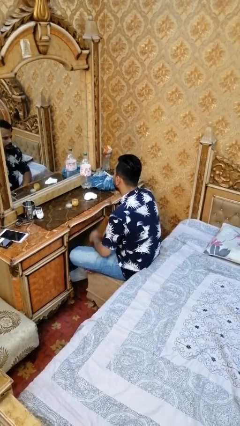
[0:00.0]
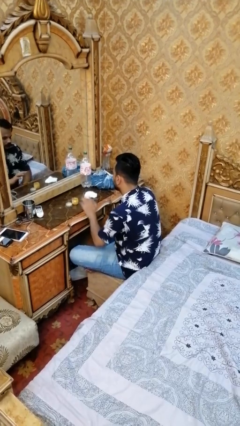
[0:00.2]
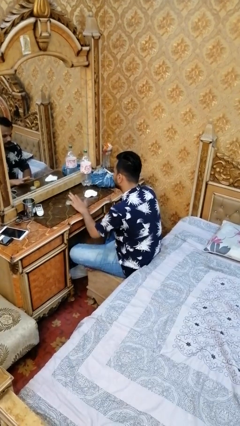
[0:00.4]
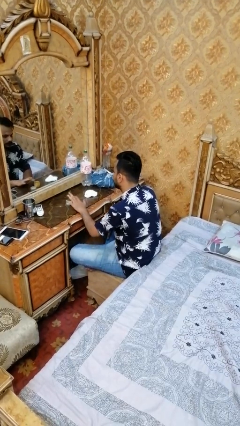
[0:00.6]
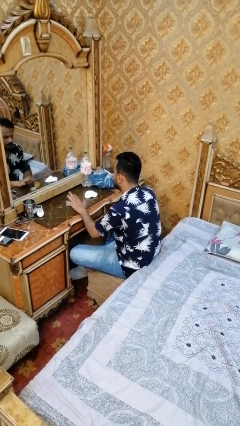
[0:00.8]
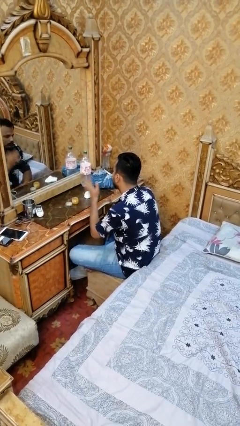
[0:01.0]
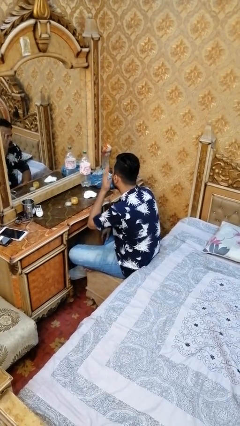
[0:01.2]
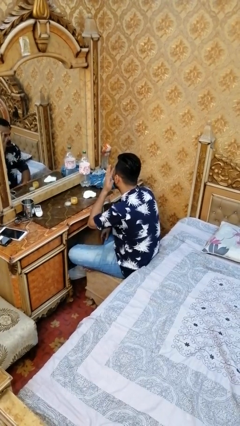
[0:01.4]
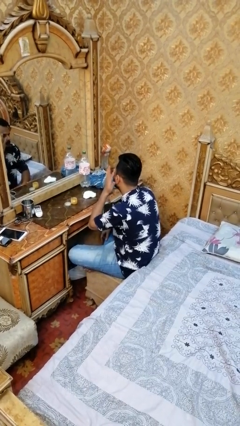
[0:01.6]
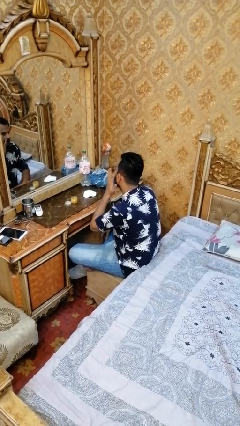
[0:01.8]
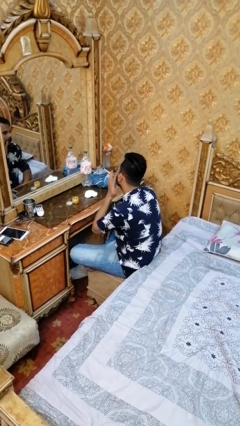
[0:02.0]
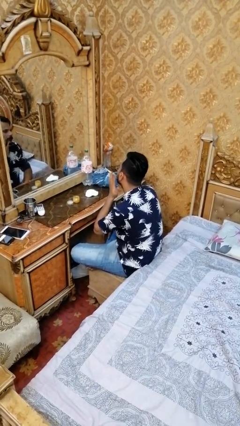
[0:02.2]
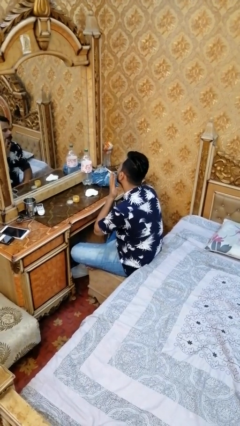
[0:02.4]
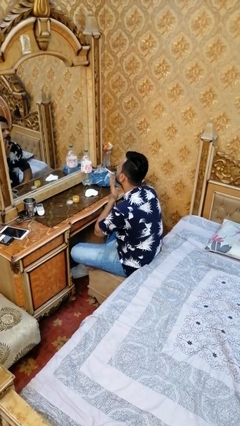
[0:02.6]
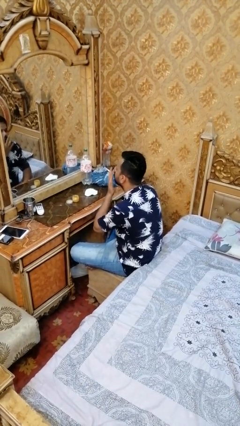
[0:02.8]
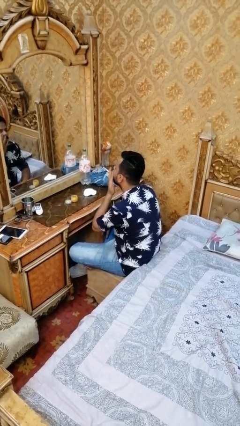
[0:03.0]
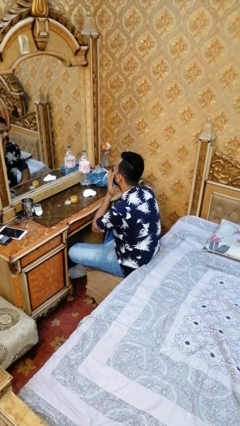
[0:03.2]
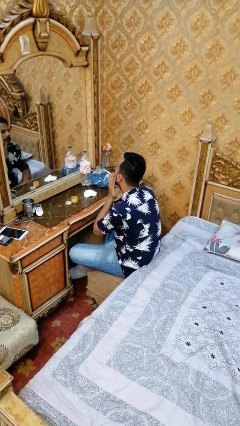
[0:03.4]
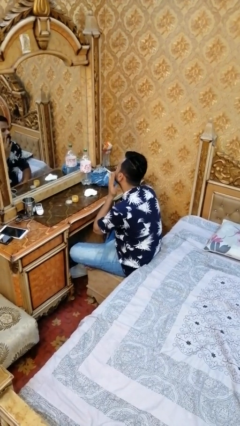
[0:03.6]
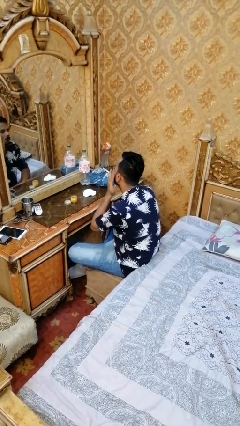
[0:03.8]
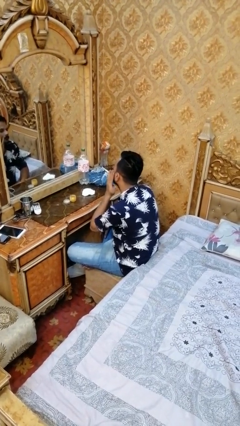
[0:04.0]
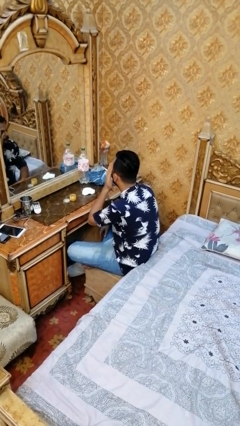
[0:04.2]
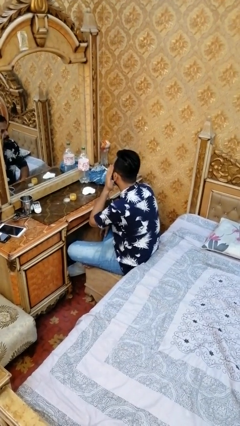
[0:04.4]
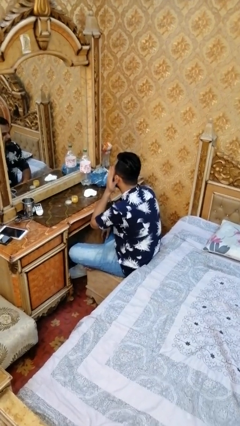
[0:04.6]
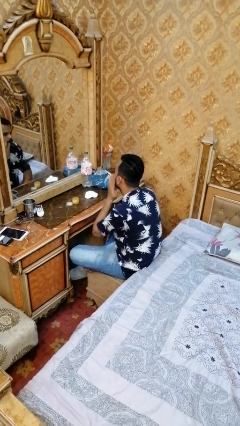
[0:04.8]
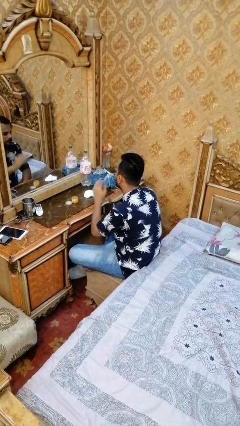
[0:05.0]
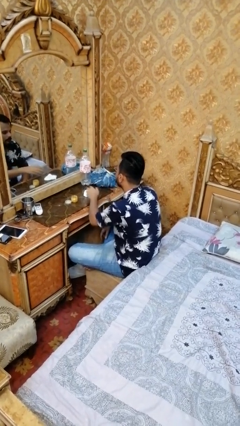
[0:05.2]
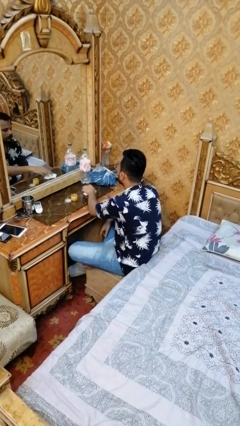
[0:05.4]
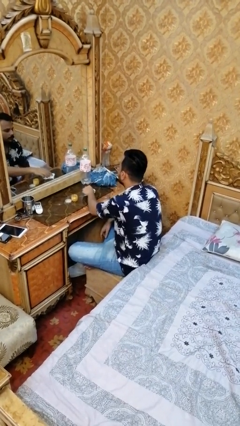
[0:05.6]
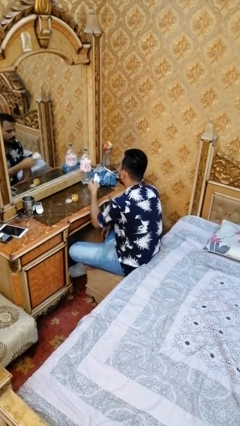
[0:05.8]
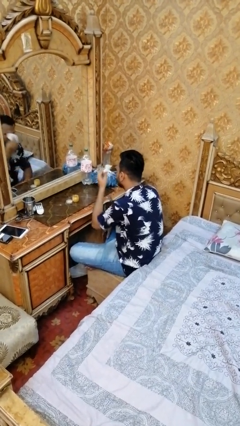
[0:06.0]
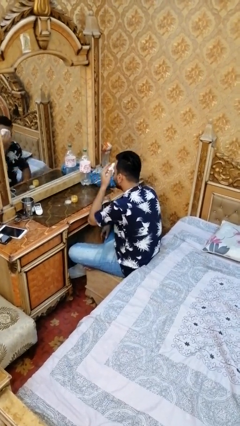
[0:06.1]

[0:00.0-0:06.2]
person puts on facemask

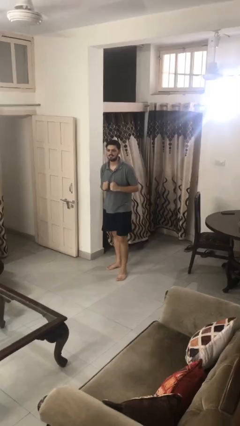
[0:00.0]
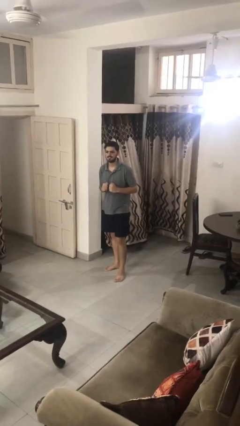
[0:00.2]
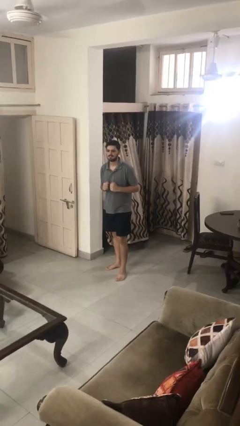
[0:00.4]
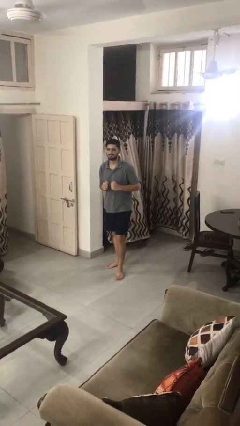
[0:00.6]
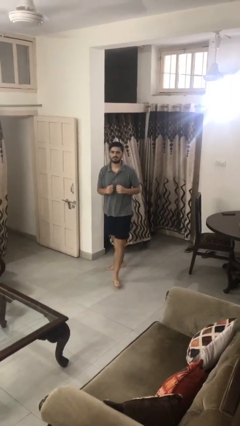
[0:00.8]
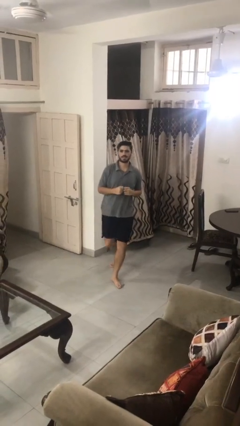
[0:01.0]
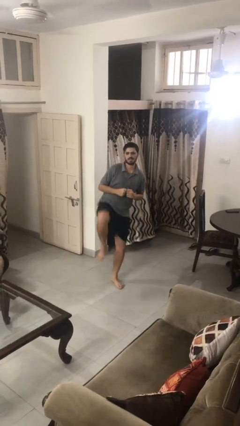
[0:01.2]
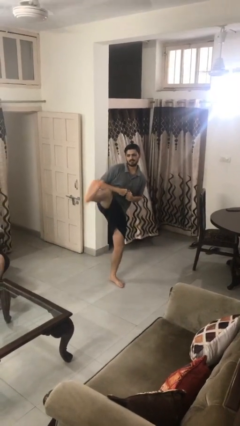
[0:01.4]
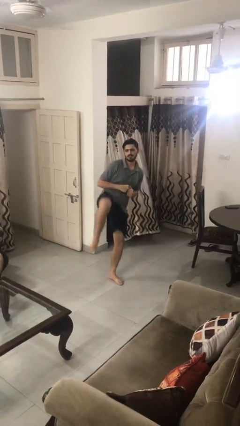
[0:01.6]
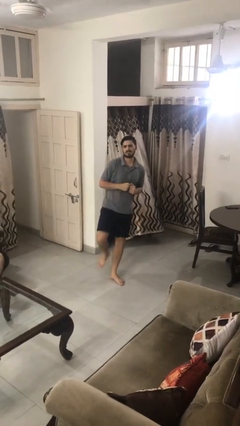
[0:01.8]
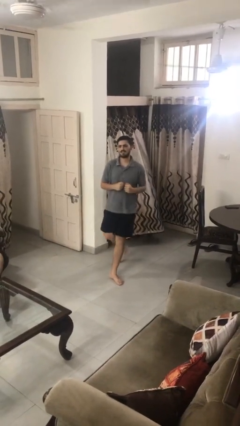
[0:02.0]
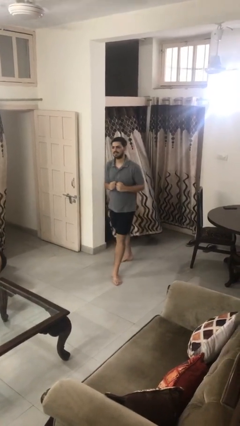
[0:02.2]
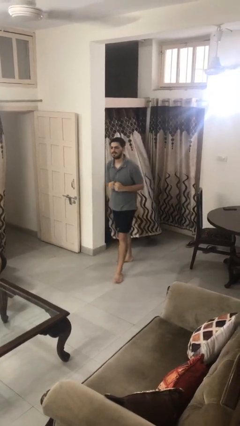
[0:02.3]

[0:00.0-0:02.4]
person karate kicks

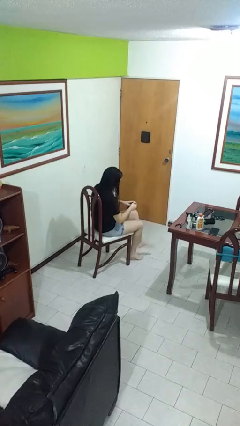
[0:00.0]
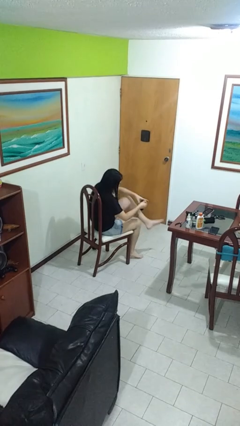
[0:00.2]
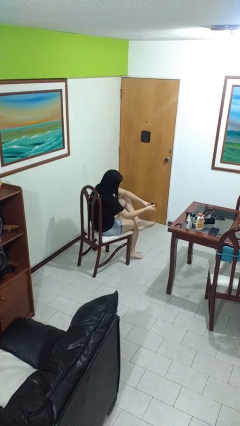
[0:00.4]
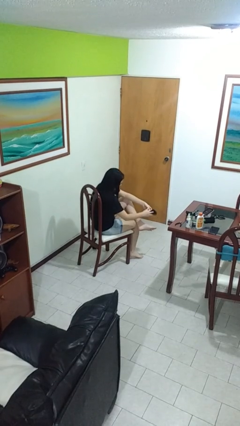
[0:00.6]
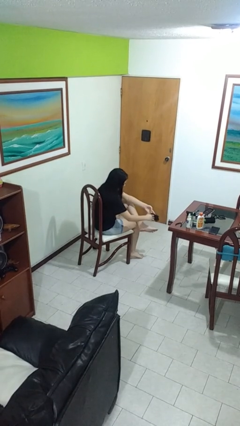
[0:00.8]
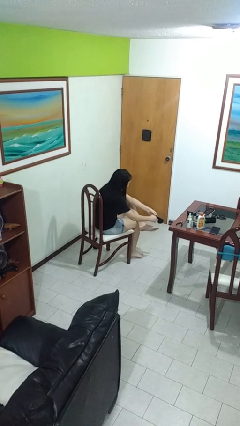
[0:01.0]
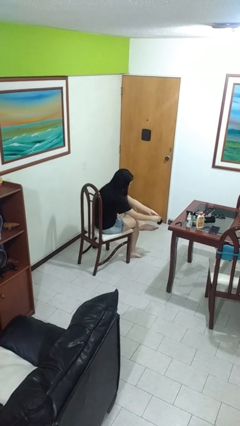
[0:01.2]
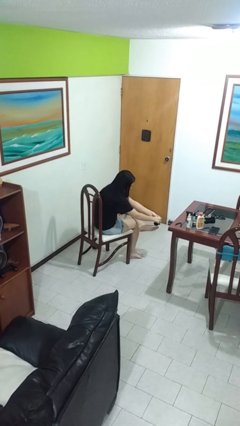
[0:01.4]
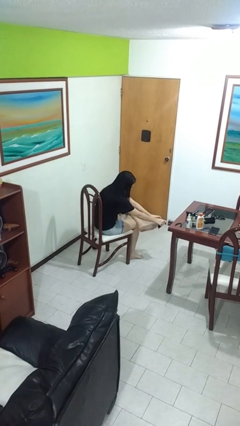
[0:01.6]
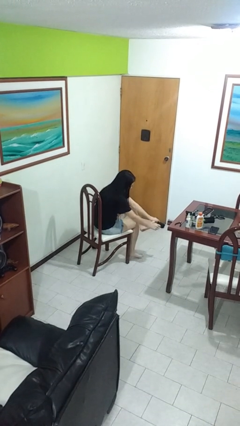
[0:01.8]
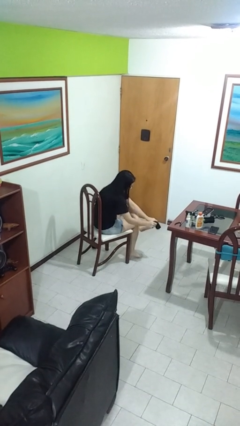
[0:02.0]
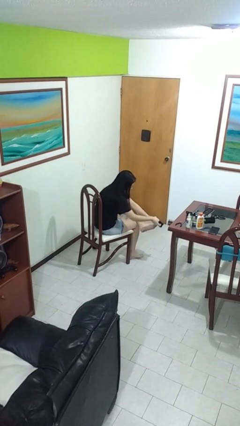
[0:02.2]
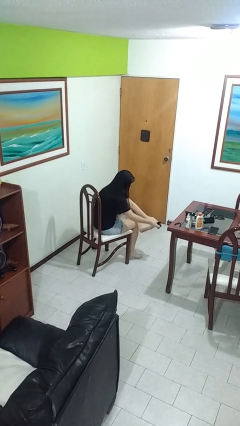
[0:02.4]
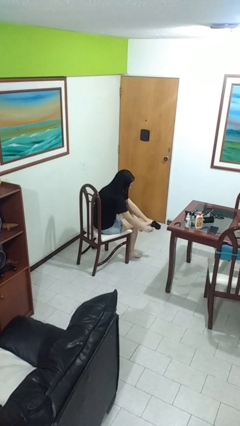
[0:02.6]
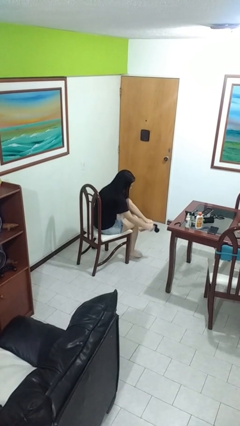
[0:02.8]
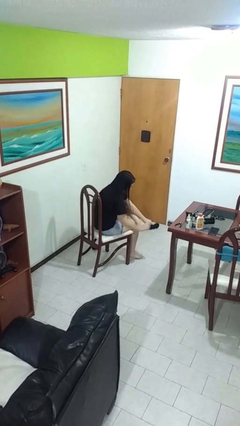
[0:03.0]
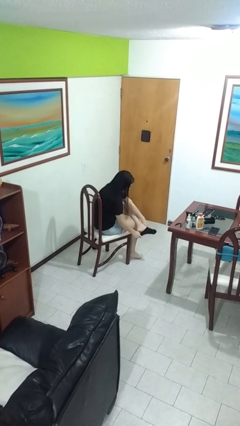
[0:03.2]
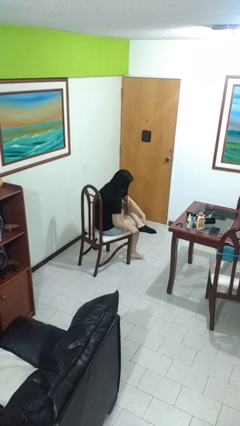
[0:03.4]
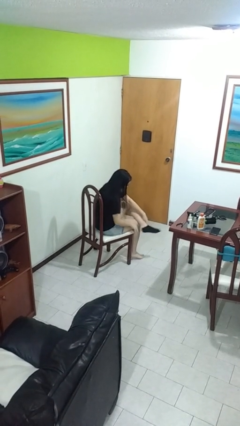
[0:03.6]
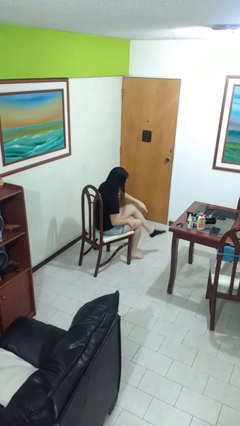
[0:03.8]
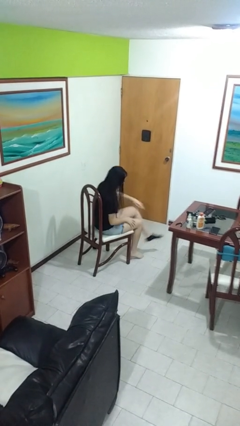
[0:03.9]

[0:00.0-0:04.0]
person puts on socks

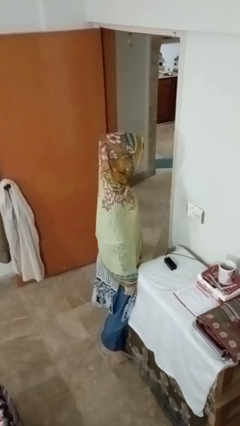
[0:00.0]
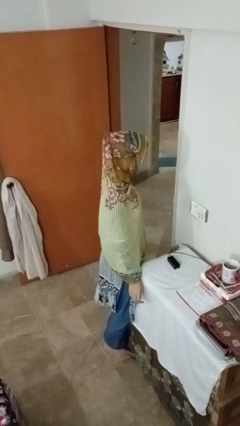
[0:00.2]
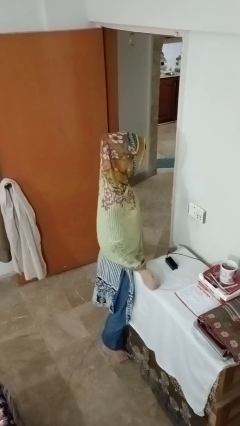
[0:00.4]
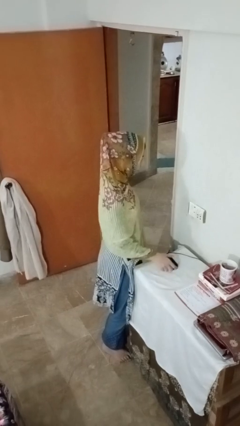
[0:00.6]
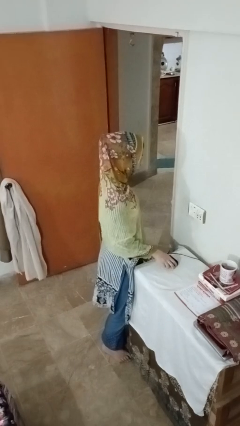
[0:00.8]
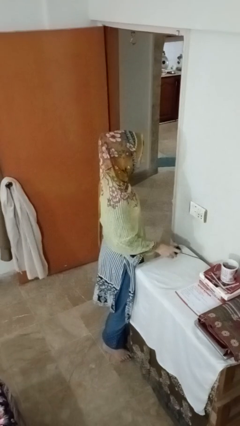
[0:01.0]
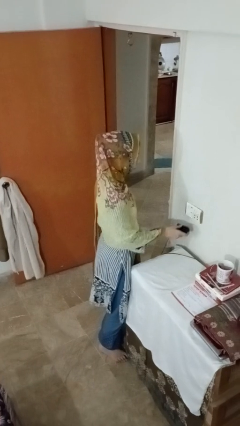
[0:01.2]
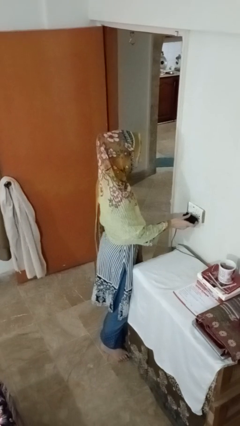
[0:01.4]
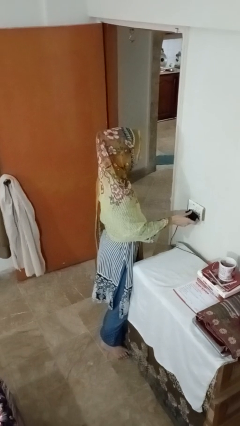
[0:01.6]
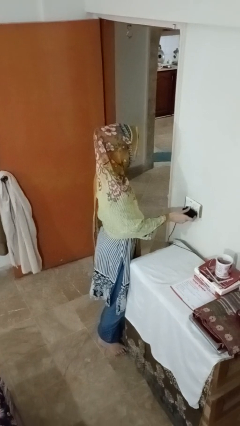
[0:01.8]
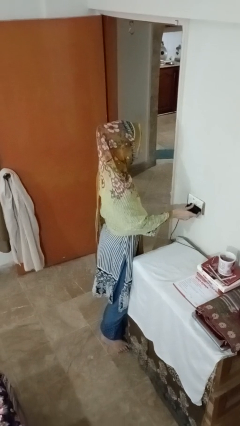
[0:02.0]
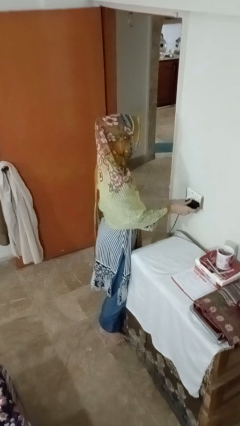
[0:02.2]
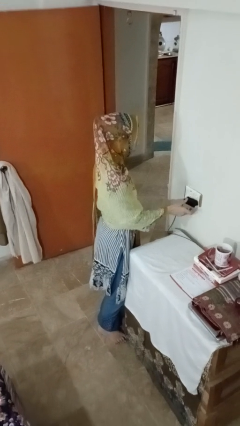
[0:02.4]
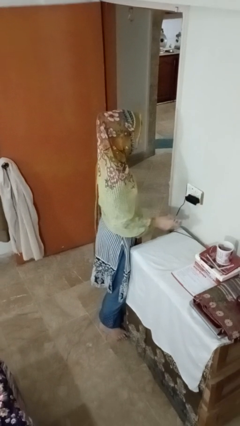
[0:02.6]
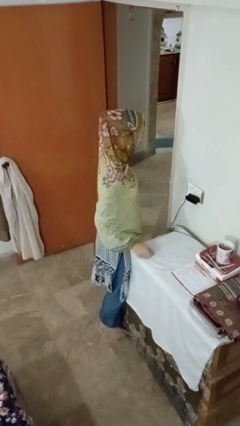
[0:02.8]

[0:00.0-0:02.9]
person plugs into electrical socket

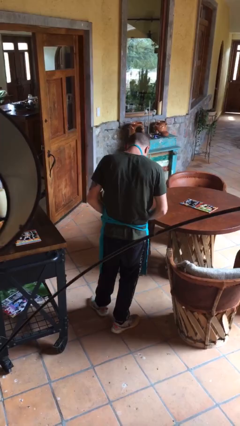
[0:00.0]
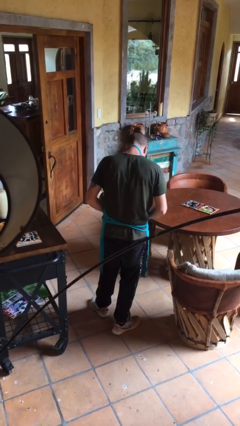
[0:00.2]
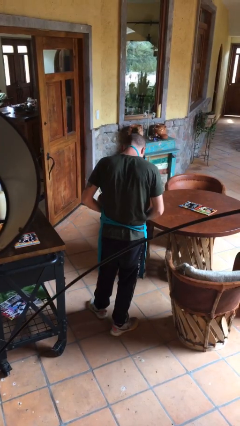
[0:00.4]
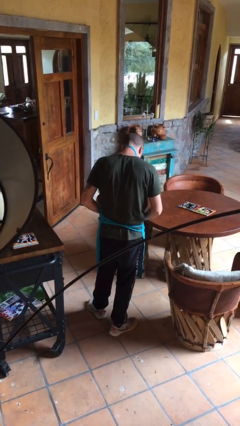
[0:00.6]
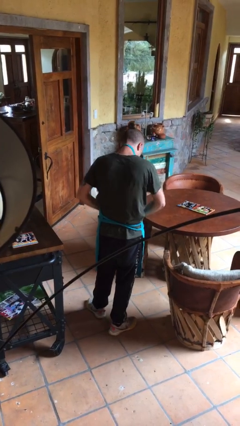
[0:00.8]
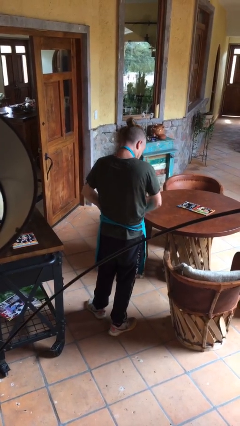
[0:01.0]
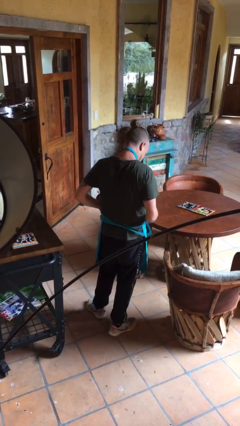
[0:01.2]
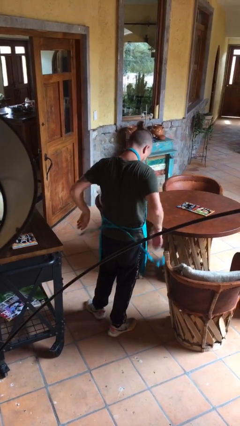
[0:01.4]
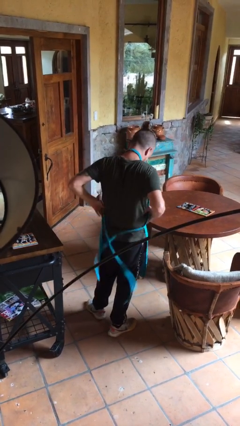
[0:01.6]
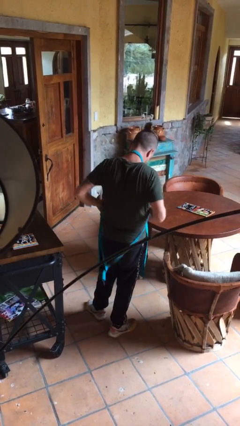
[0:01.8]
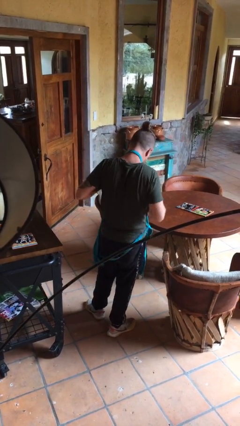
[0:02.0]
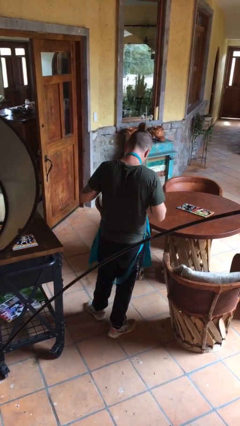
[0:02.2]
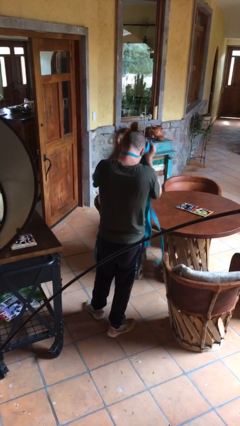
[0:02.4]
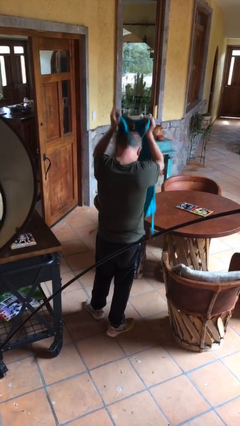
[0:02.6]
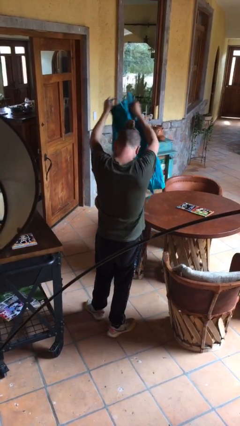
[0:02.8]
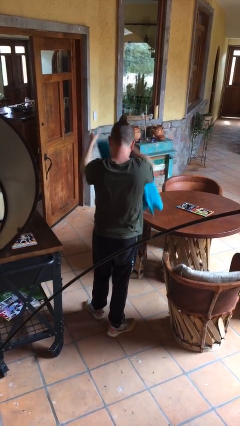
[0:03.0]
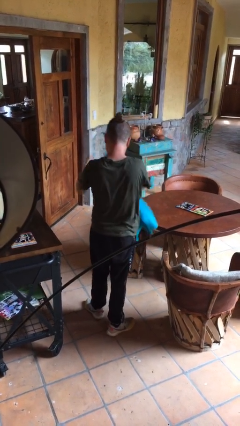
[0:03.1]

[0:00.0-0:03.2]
person takes off apron
